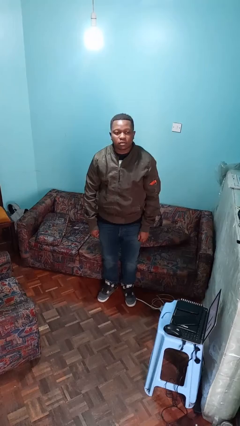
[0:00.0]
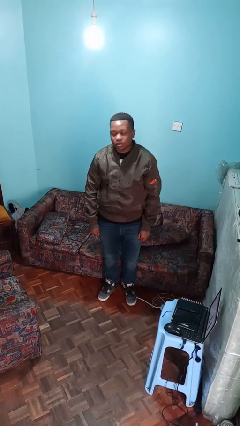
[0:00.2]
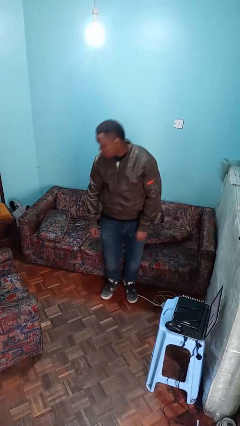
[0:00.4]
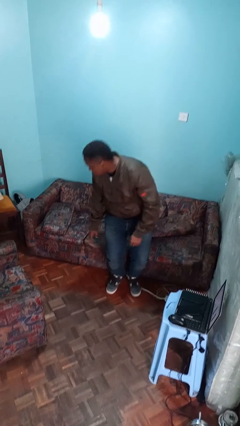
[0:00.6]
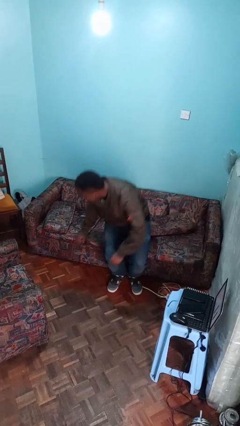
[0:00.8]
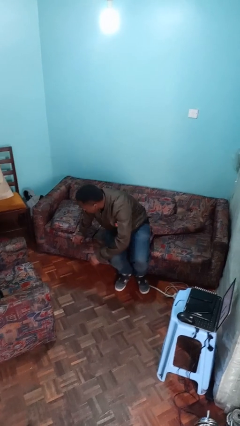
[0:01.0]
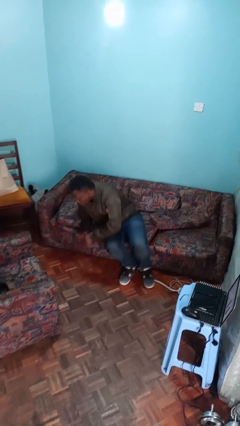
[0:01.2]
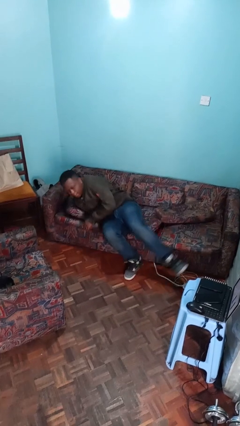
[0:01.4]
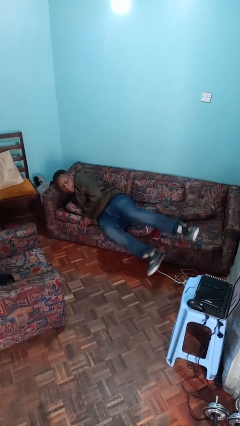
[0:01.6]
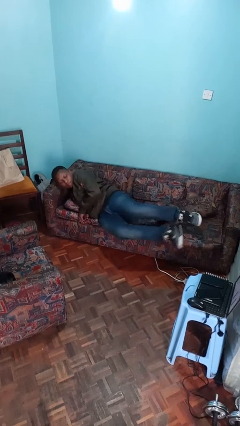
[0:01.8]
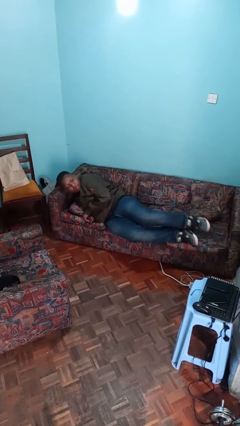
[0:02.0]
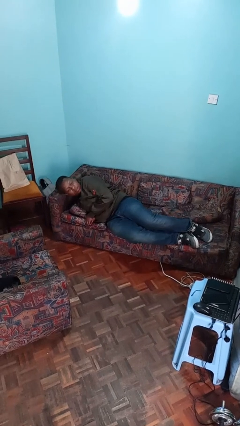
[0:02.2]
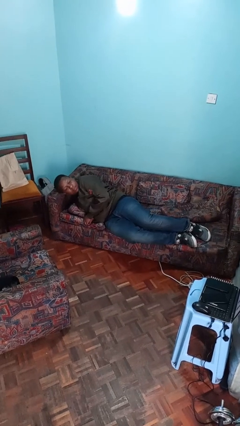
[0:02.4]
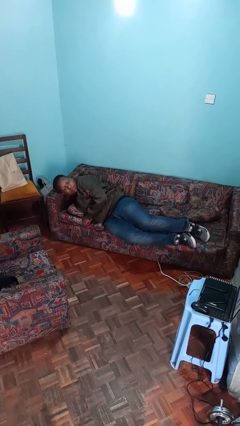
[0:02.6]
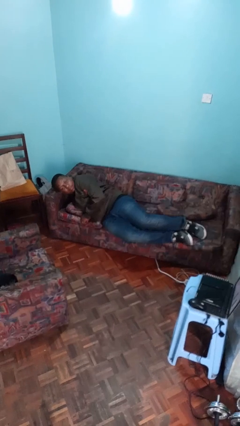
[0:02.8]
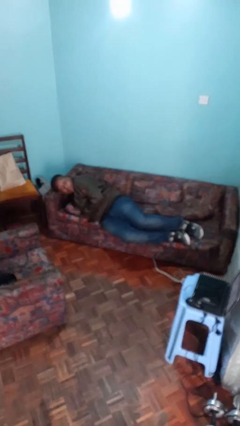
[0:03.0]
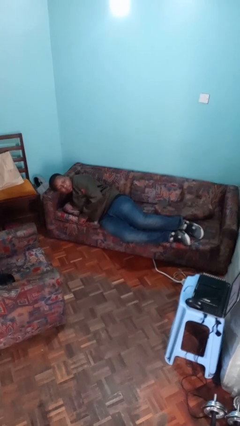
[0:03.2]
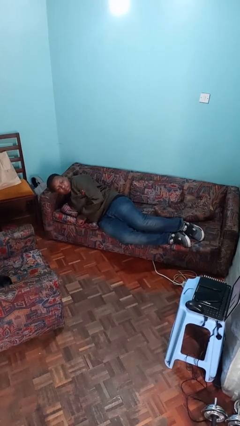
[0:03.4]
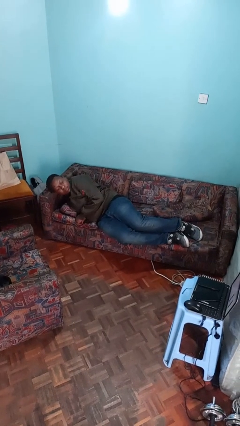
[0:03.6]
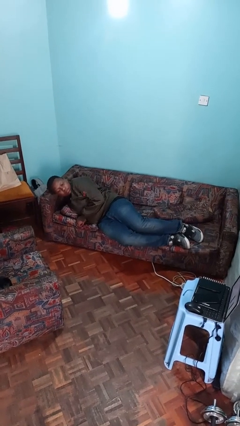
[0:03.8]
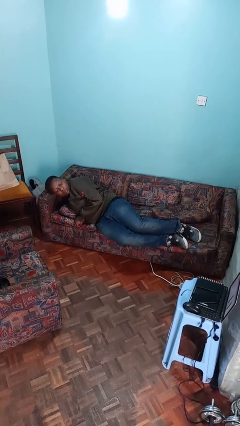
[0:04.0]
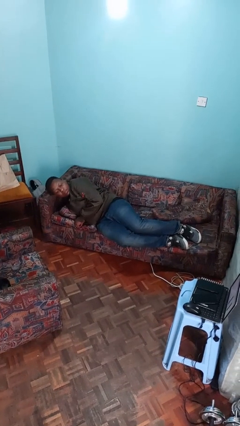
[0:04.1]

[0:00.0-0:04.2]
person lies down on couch

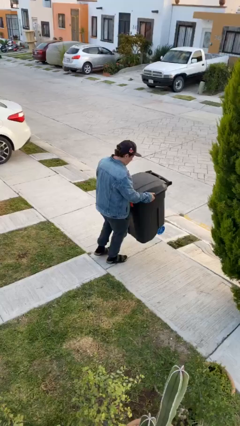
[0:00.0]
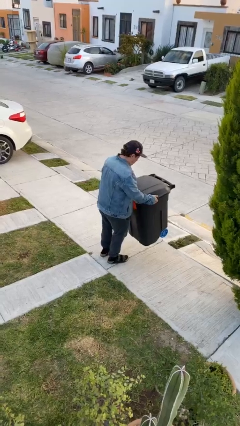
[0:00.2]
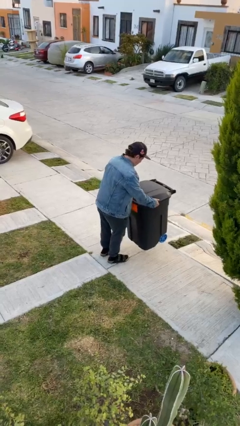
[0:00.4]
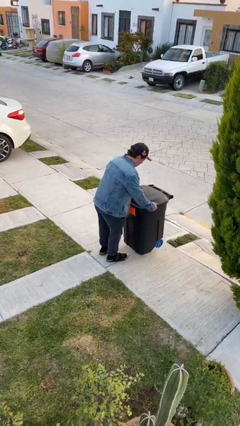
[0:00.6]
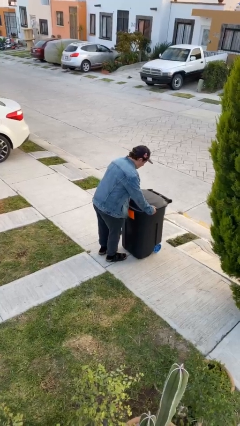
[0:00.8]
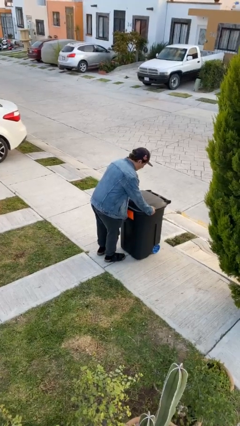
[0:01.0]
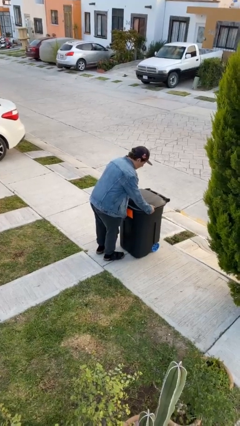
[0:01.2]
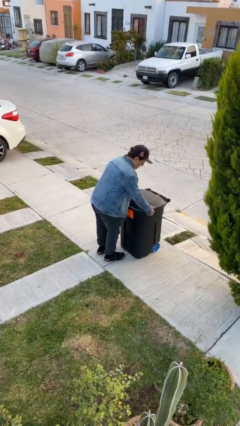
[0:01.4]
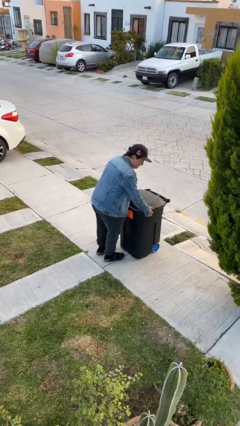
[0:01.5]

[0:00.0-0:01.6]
person puts down object on floor

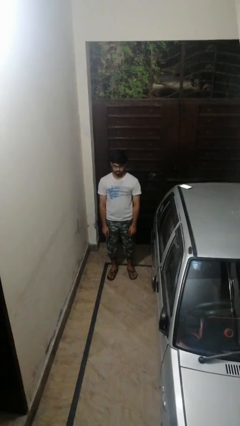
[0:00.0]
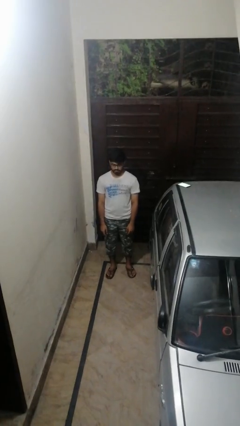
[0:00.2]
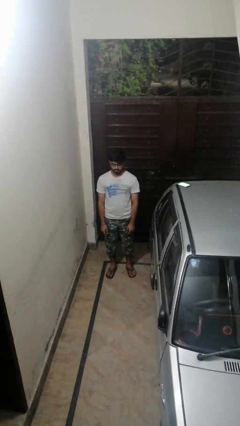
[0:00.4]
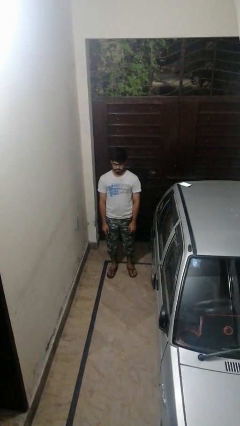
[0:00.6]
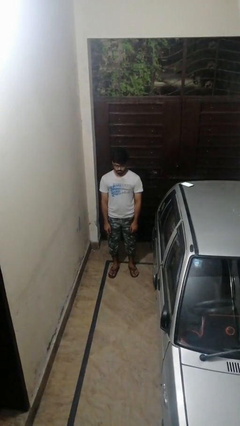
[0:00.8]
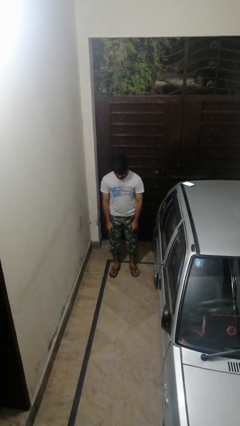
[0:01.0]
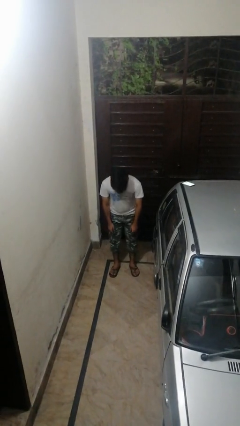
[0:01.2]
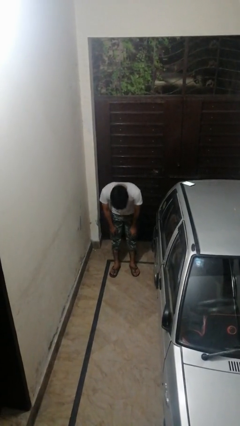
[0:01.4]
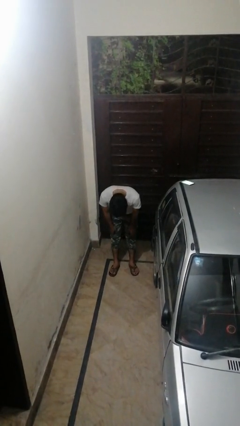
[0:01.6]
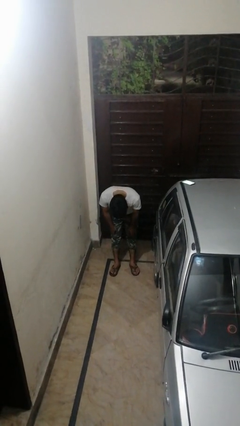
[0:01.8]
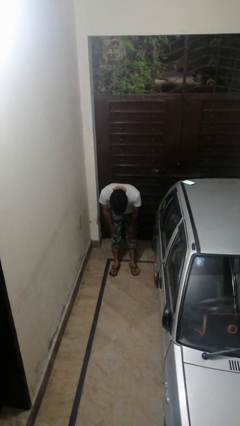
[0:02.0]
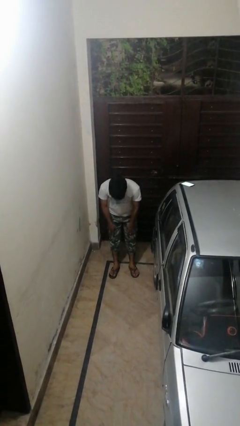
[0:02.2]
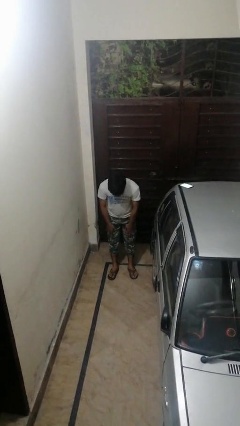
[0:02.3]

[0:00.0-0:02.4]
person bows

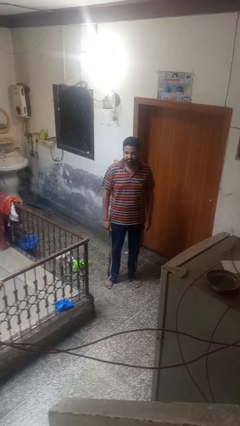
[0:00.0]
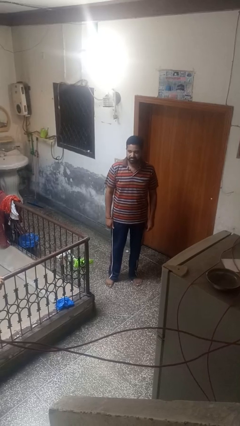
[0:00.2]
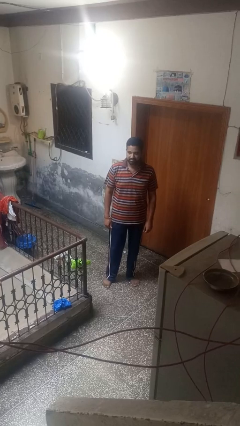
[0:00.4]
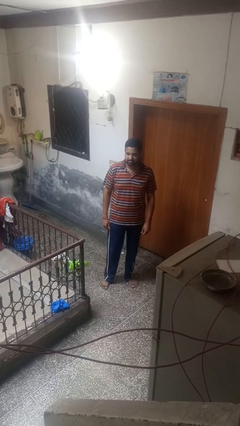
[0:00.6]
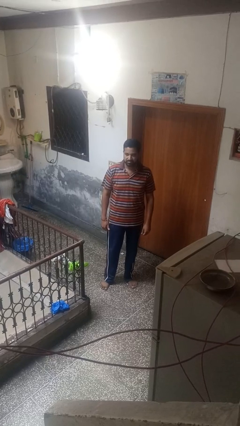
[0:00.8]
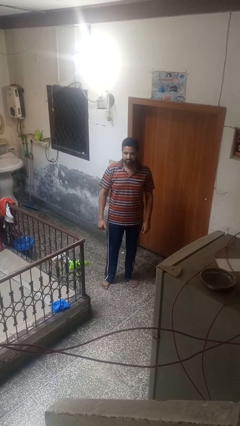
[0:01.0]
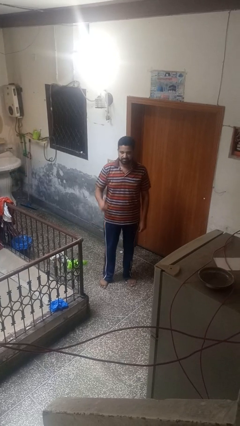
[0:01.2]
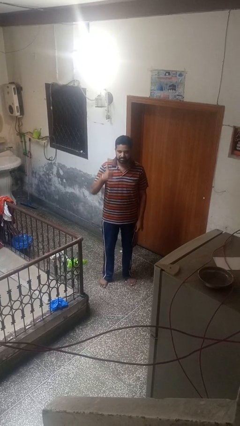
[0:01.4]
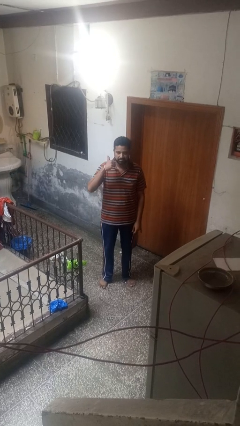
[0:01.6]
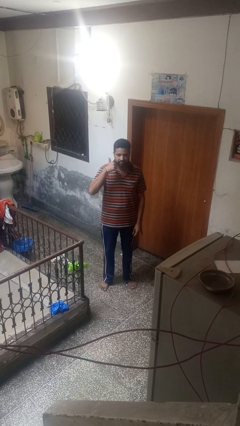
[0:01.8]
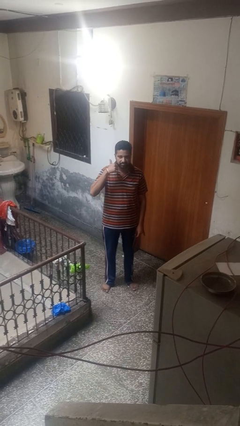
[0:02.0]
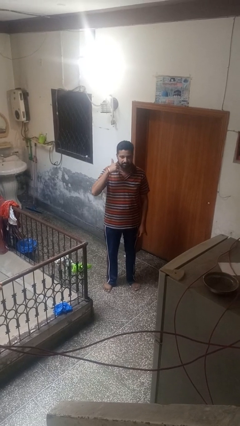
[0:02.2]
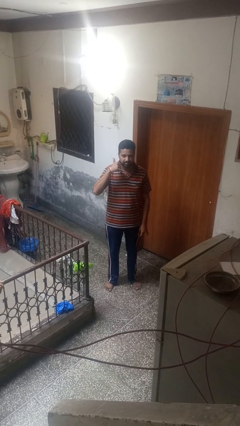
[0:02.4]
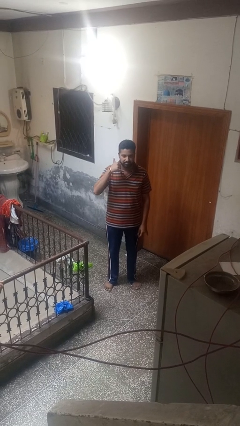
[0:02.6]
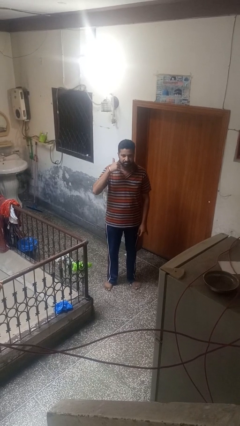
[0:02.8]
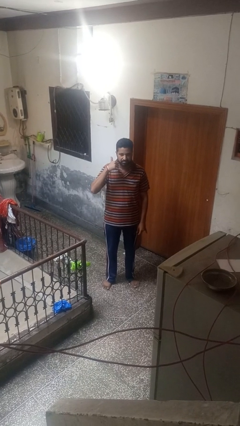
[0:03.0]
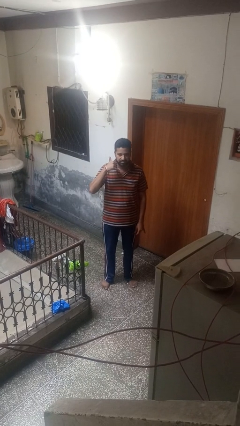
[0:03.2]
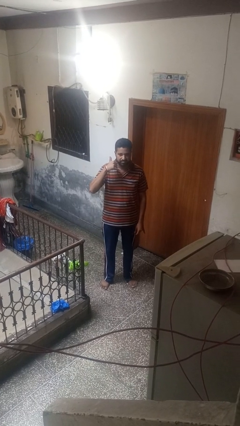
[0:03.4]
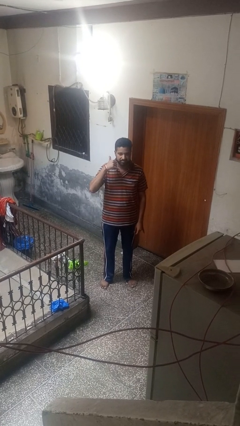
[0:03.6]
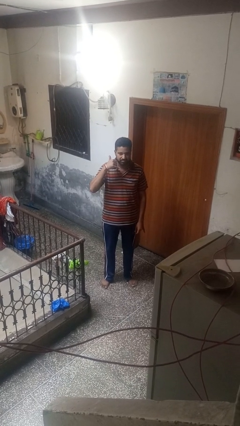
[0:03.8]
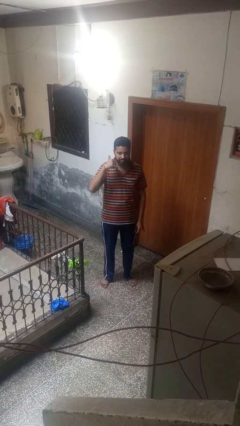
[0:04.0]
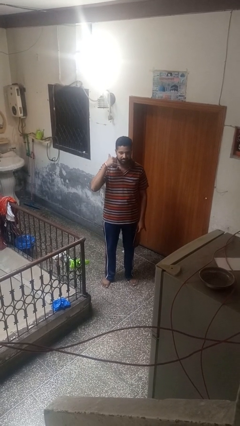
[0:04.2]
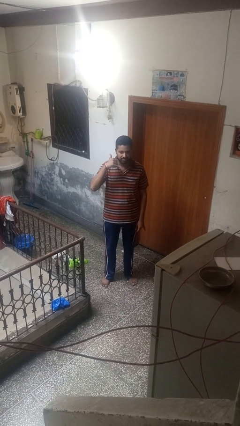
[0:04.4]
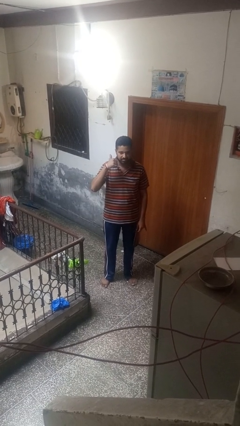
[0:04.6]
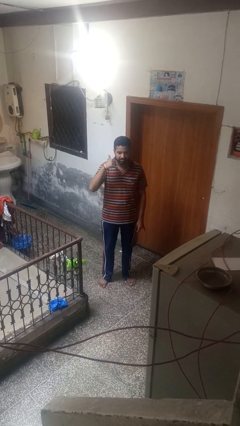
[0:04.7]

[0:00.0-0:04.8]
person gestures call me

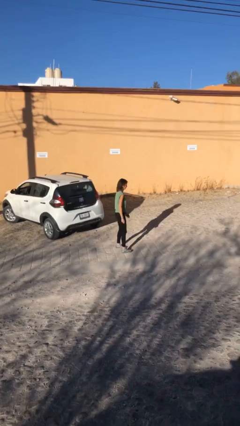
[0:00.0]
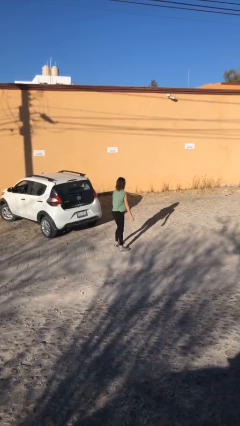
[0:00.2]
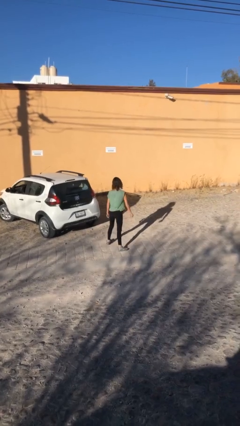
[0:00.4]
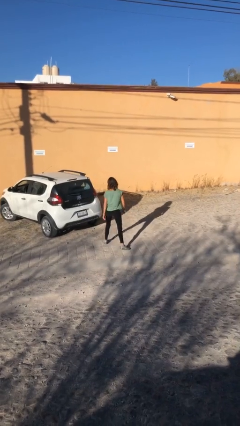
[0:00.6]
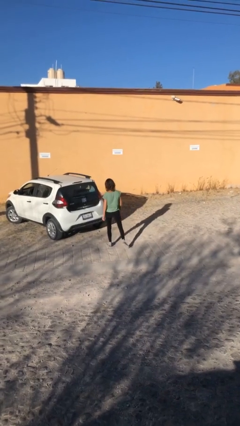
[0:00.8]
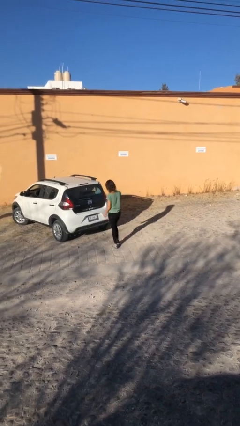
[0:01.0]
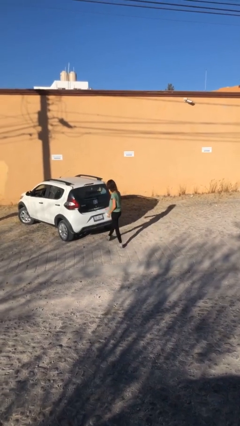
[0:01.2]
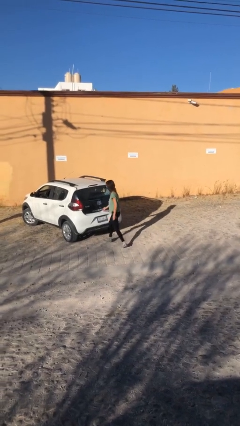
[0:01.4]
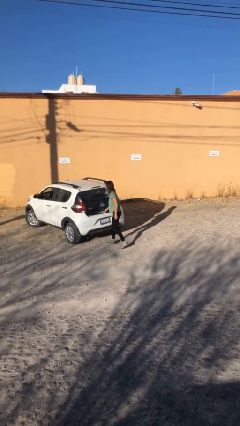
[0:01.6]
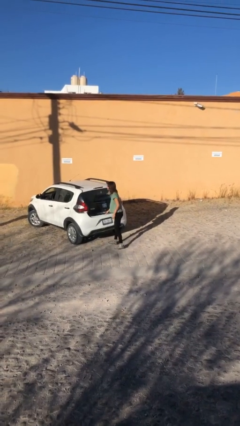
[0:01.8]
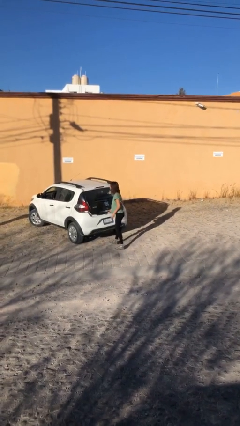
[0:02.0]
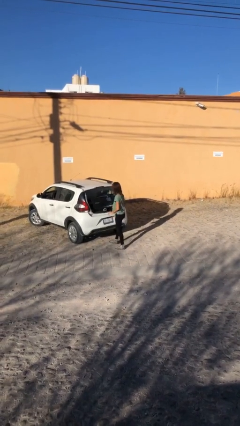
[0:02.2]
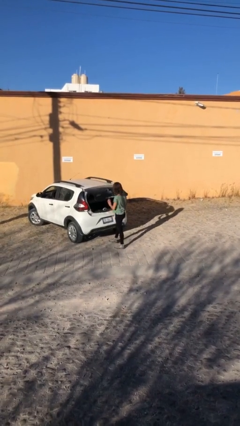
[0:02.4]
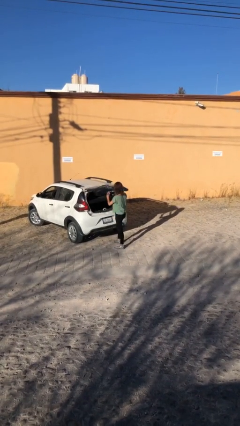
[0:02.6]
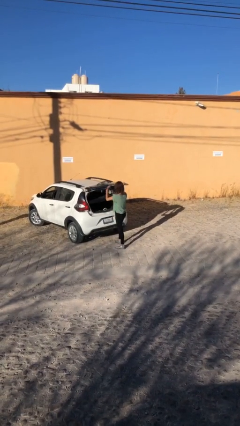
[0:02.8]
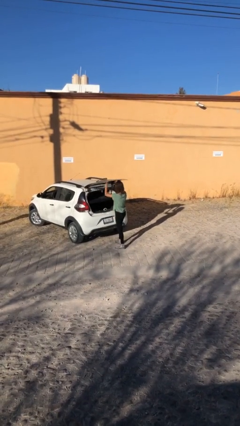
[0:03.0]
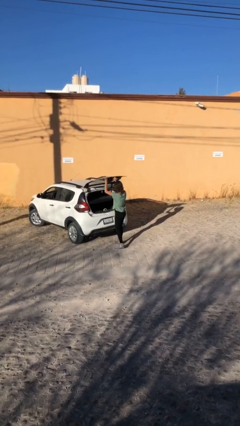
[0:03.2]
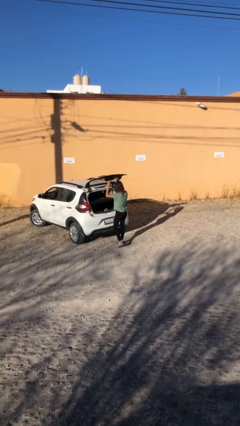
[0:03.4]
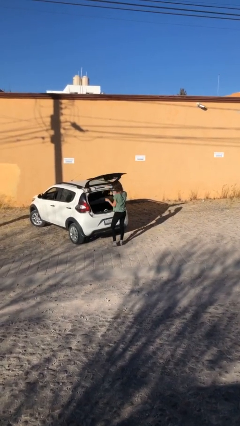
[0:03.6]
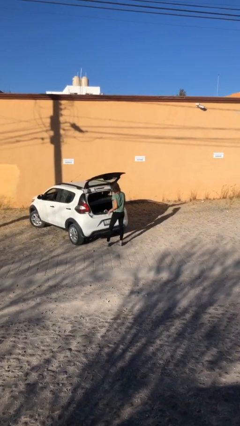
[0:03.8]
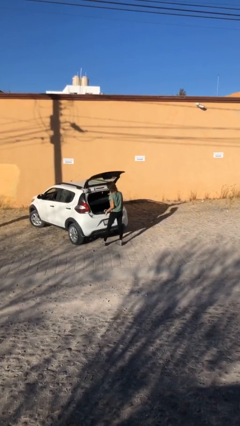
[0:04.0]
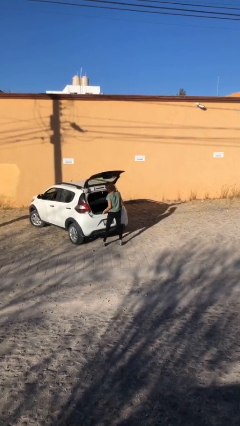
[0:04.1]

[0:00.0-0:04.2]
person opens car trunk

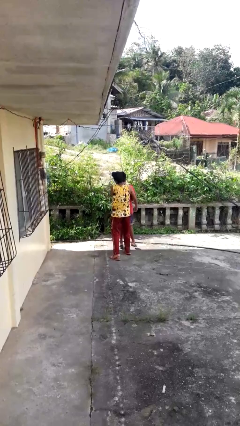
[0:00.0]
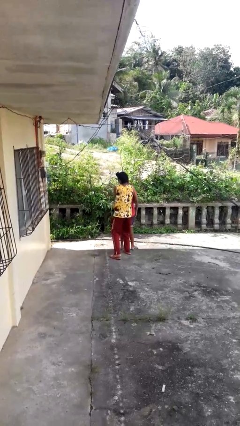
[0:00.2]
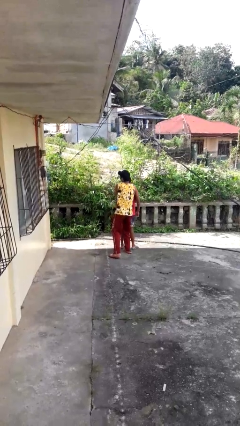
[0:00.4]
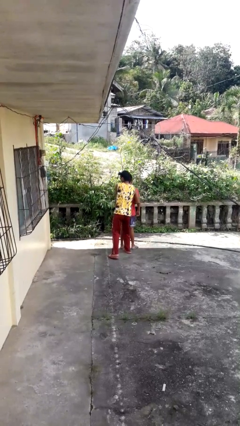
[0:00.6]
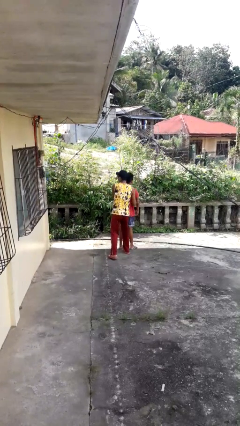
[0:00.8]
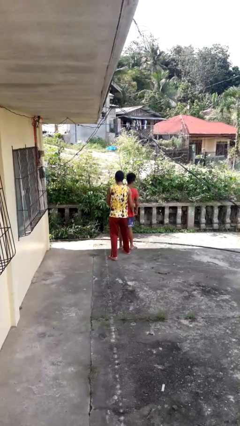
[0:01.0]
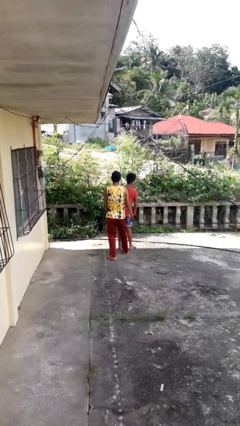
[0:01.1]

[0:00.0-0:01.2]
person puts down person
